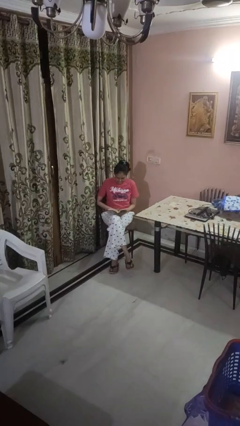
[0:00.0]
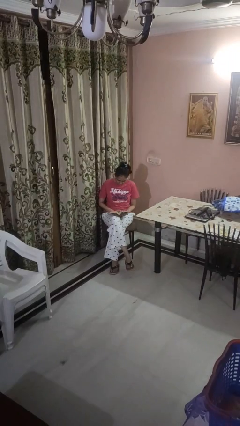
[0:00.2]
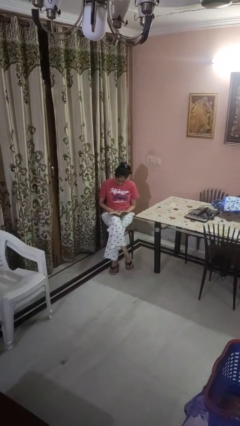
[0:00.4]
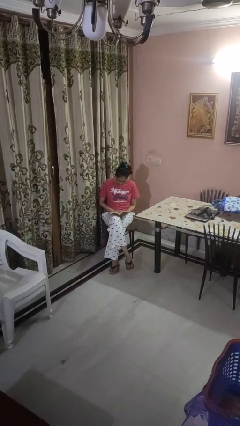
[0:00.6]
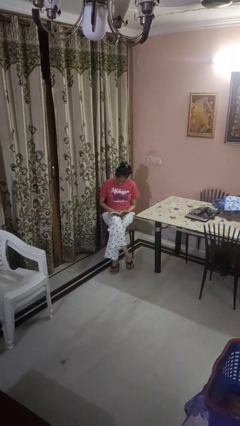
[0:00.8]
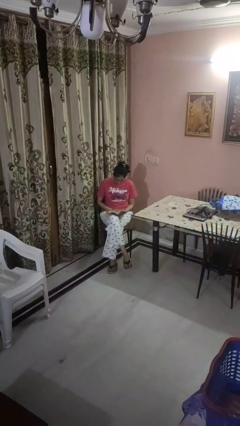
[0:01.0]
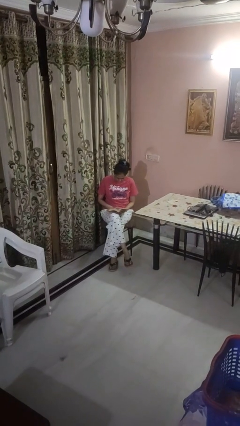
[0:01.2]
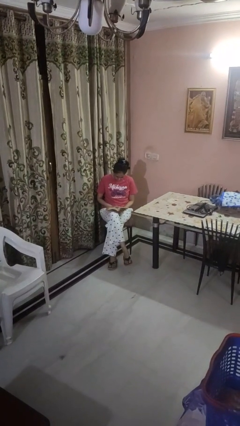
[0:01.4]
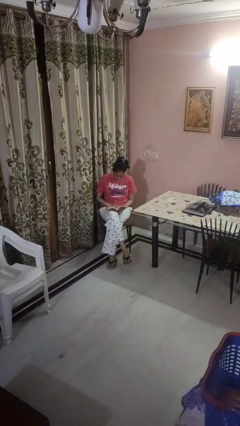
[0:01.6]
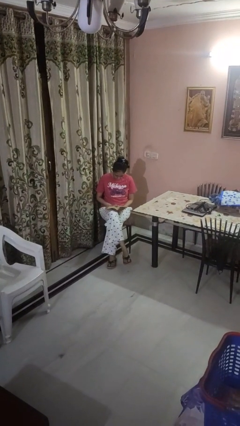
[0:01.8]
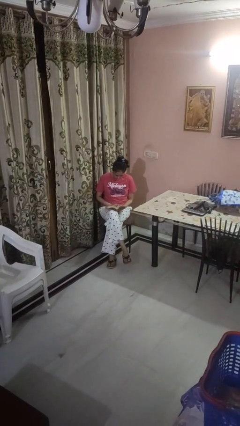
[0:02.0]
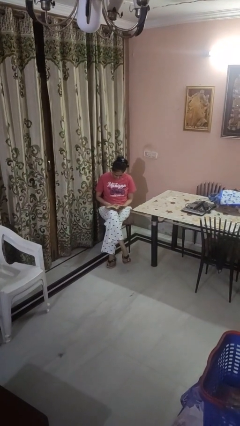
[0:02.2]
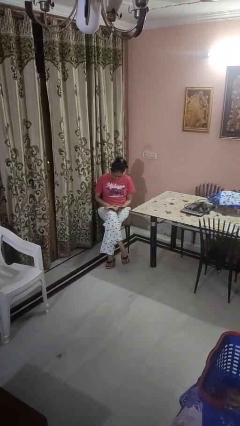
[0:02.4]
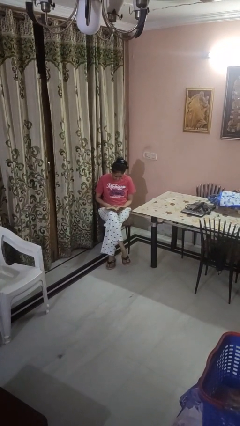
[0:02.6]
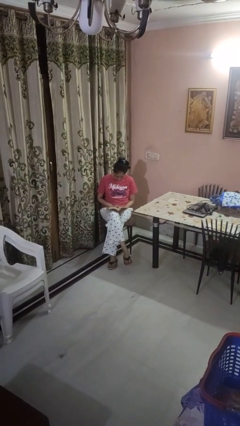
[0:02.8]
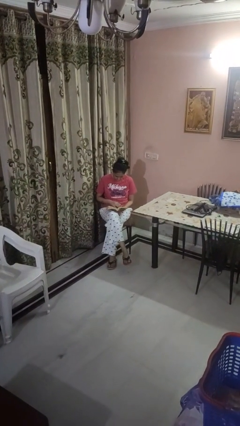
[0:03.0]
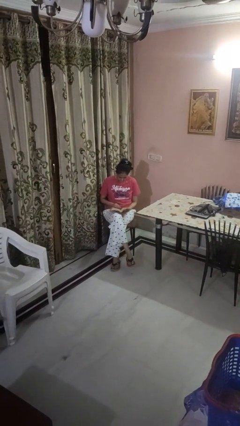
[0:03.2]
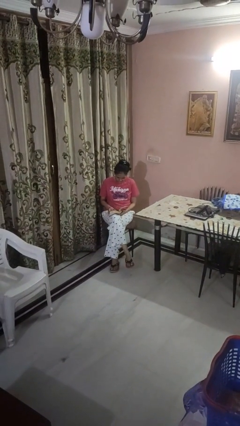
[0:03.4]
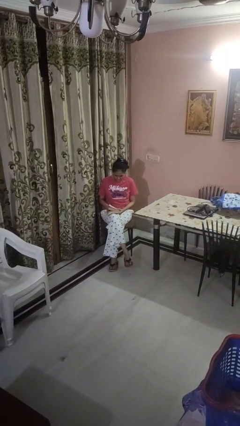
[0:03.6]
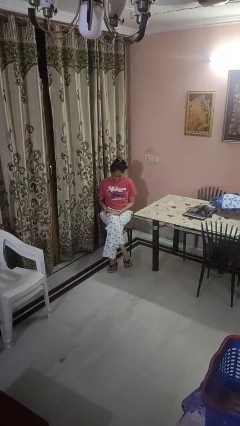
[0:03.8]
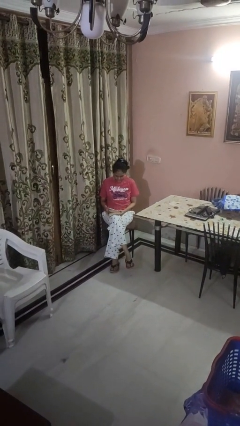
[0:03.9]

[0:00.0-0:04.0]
person reads book

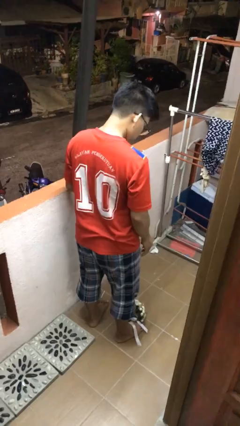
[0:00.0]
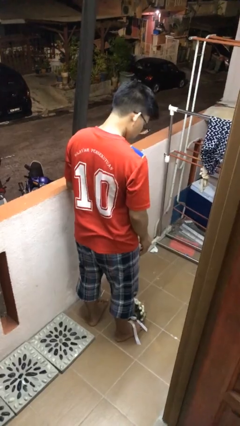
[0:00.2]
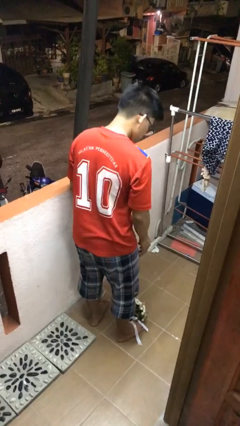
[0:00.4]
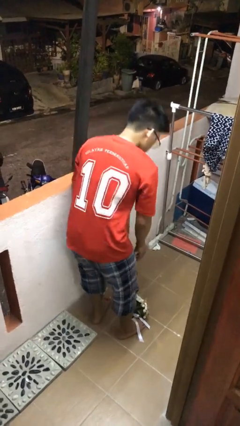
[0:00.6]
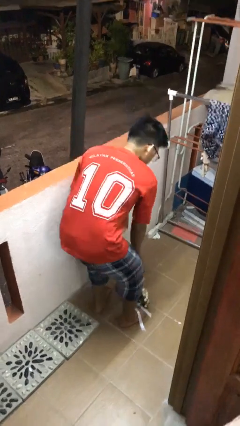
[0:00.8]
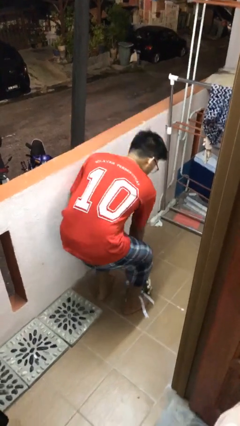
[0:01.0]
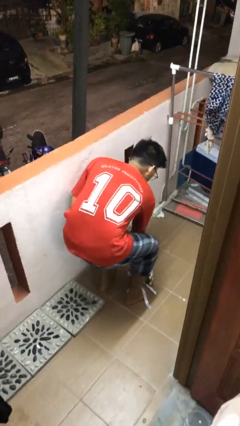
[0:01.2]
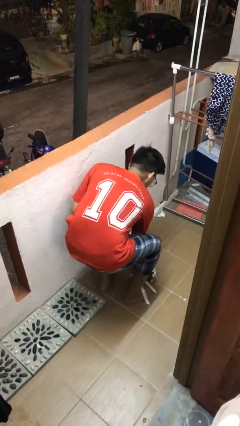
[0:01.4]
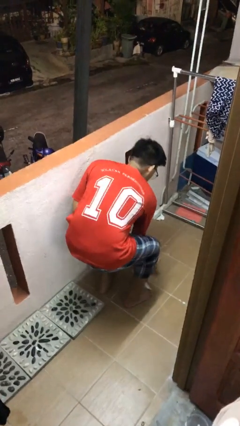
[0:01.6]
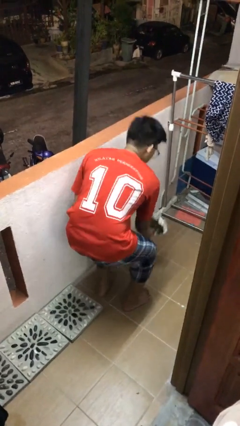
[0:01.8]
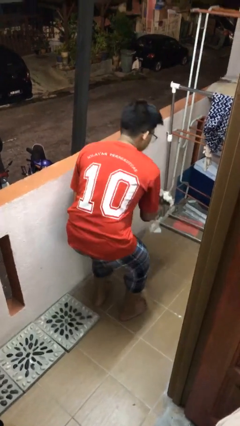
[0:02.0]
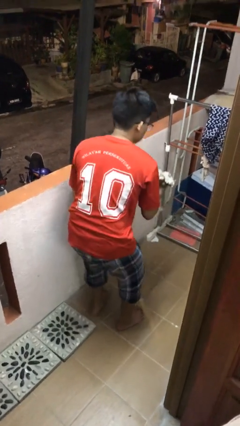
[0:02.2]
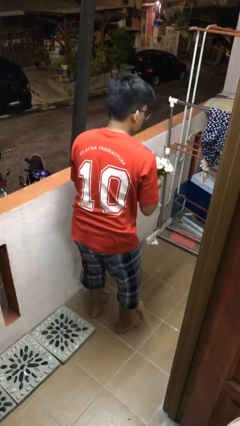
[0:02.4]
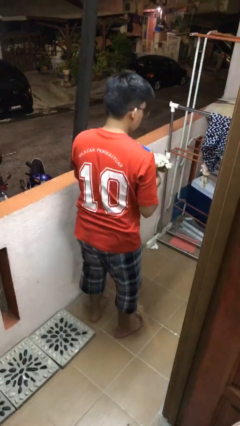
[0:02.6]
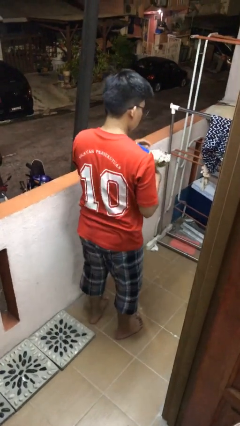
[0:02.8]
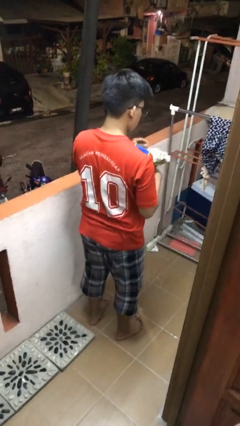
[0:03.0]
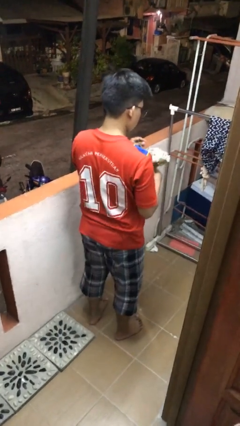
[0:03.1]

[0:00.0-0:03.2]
person picks up object from floor

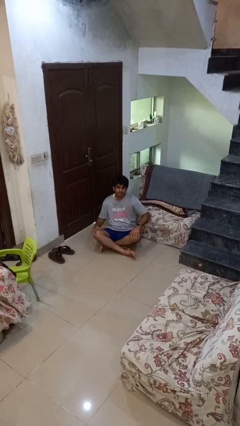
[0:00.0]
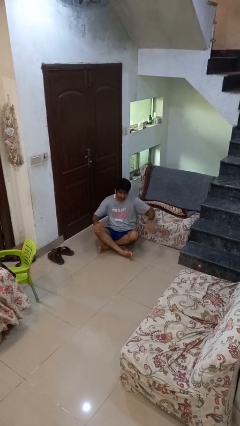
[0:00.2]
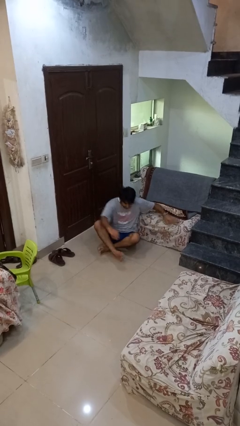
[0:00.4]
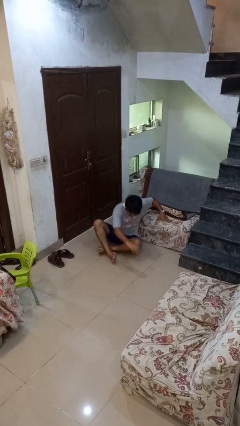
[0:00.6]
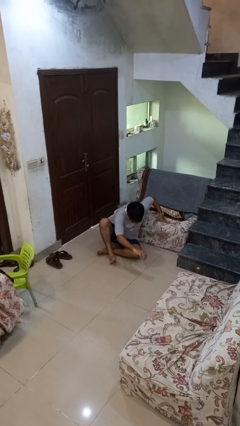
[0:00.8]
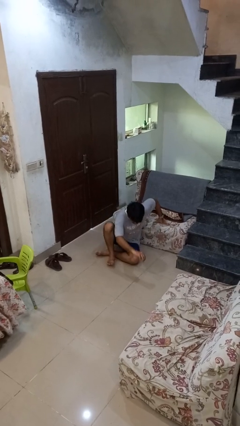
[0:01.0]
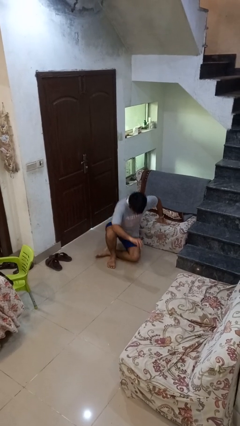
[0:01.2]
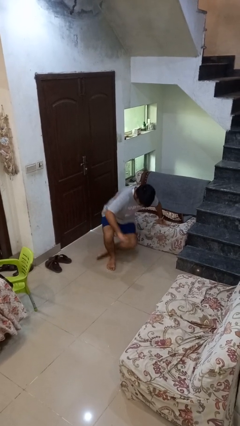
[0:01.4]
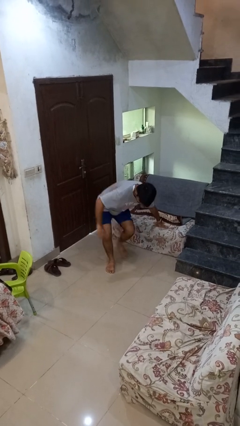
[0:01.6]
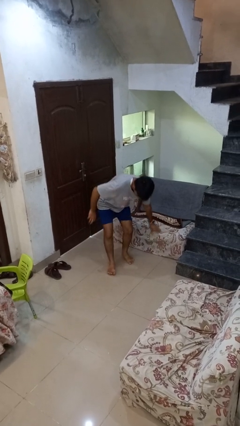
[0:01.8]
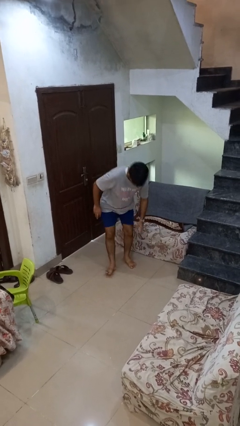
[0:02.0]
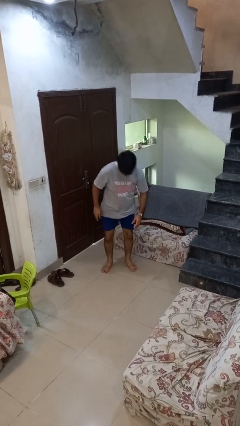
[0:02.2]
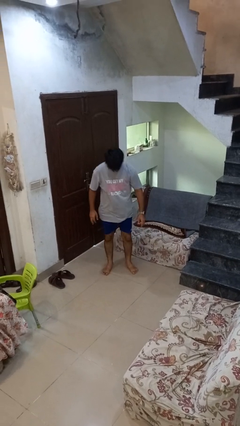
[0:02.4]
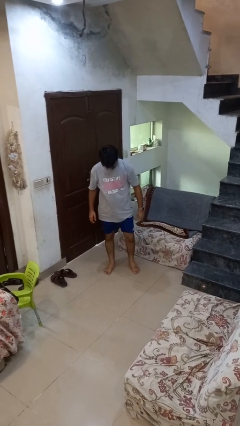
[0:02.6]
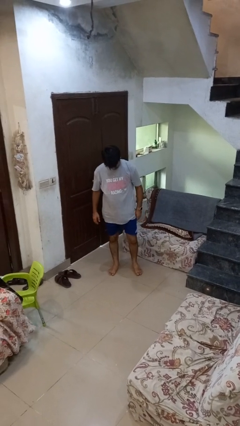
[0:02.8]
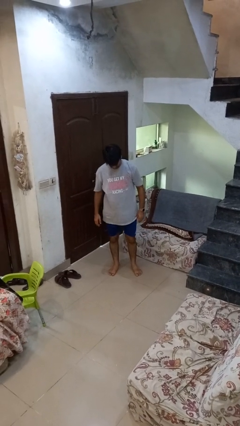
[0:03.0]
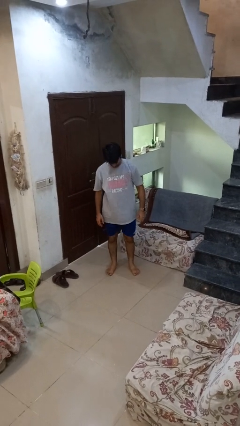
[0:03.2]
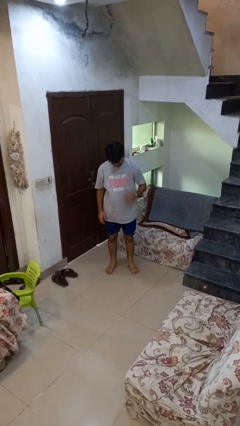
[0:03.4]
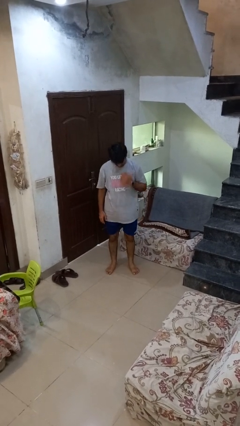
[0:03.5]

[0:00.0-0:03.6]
person stands up from floor

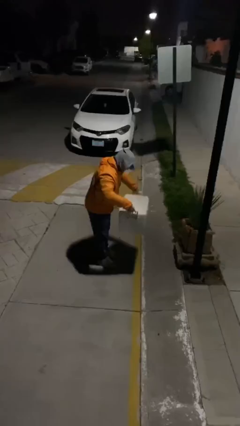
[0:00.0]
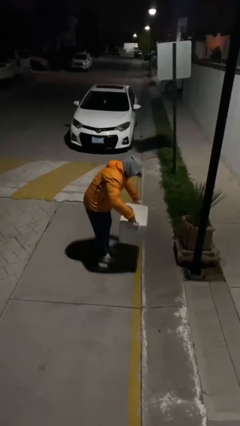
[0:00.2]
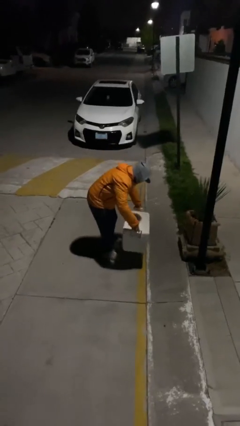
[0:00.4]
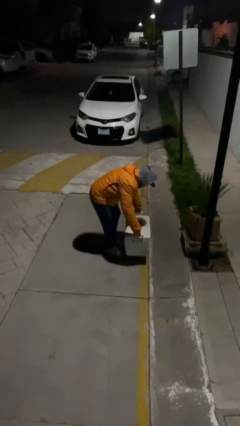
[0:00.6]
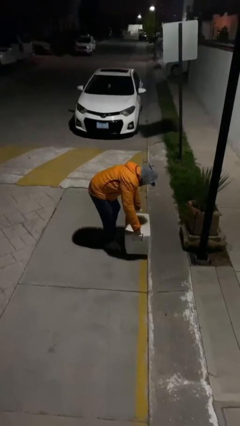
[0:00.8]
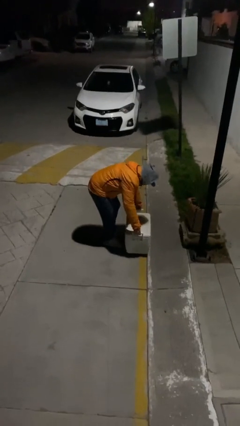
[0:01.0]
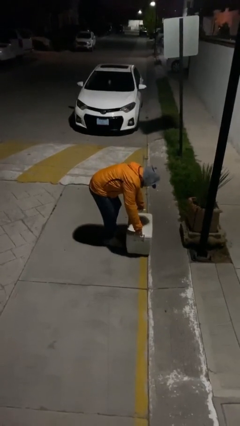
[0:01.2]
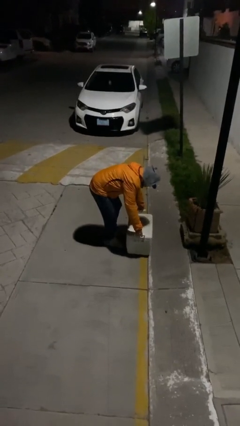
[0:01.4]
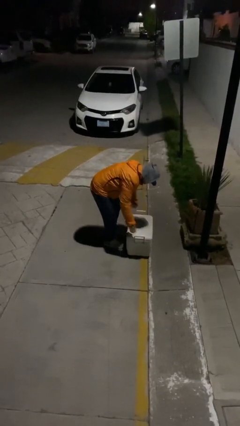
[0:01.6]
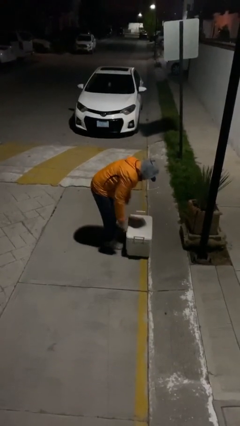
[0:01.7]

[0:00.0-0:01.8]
person puts down object on floor

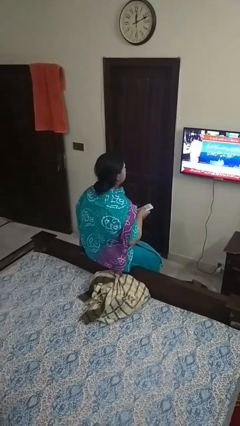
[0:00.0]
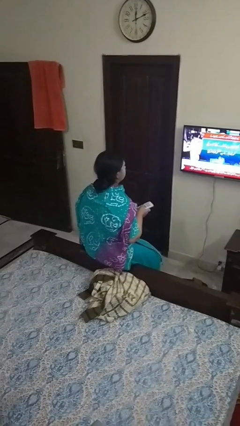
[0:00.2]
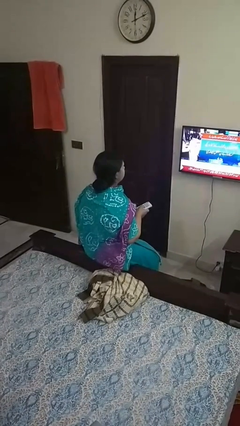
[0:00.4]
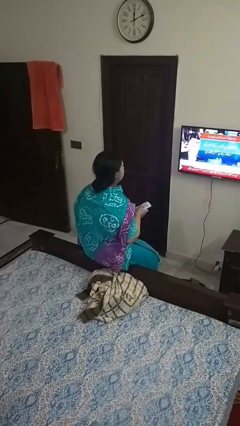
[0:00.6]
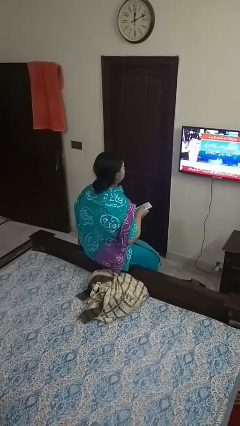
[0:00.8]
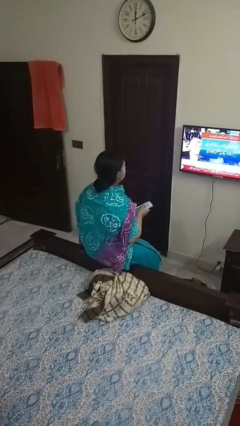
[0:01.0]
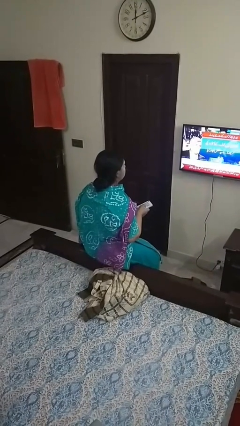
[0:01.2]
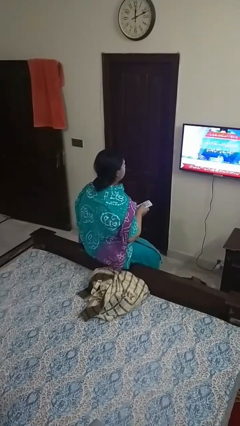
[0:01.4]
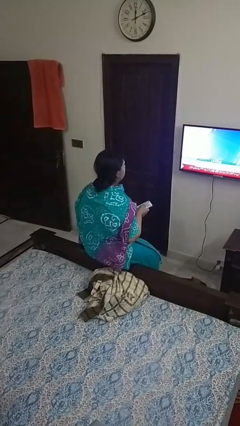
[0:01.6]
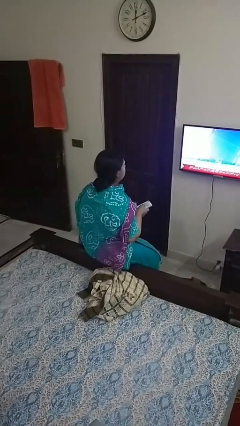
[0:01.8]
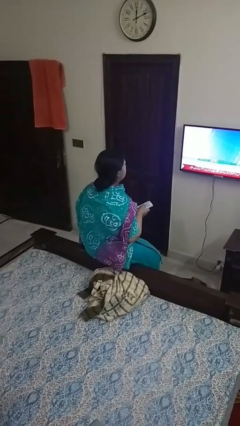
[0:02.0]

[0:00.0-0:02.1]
person uses television remote

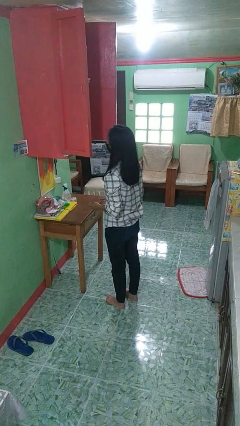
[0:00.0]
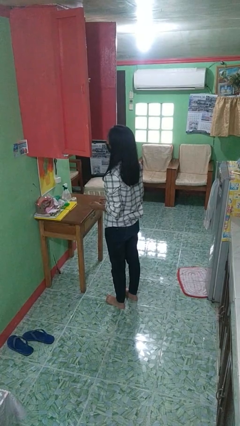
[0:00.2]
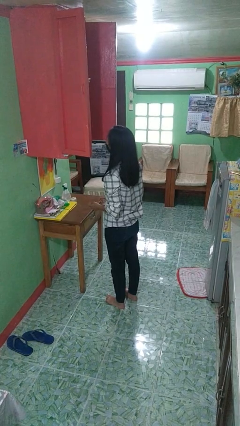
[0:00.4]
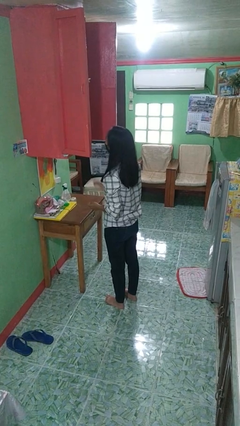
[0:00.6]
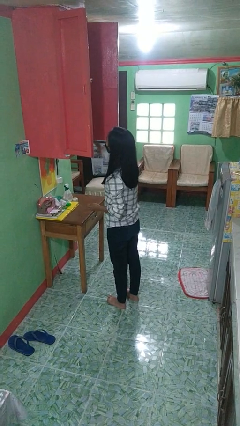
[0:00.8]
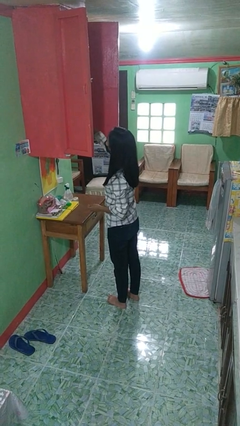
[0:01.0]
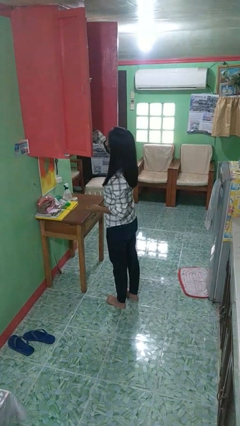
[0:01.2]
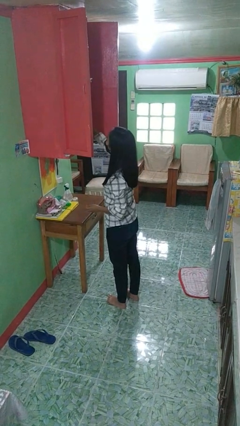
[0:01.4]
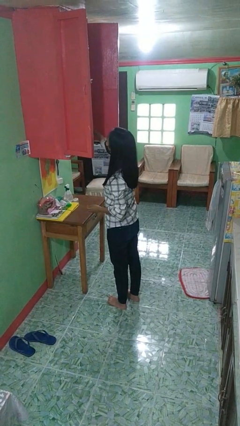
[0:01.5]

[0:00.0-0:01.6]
person picks up object from cabinet

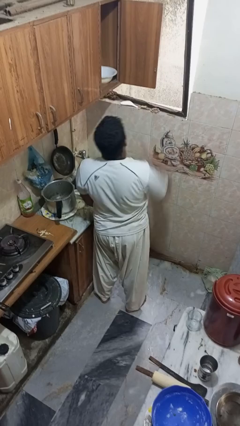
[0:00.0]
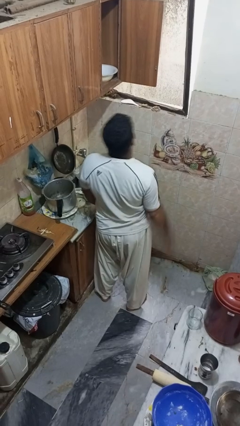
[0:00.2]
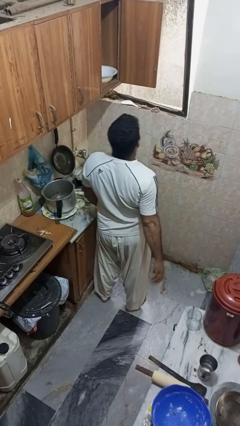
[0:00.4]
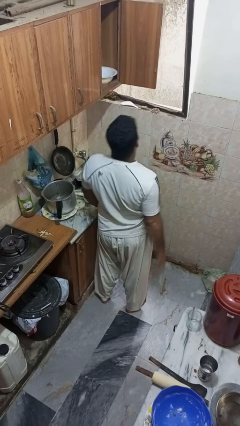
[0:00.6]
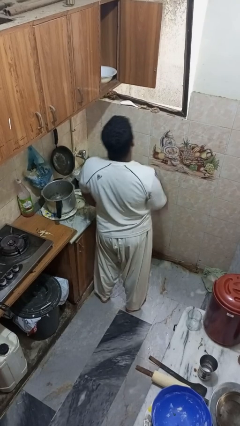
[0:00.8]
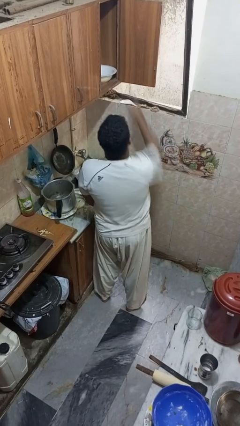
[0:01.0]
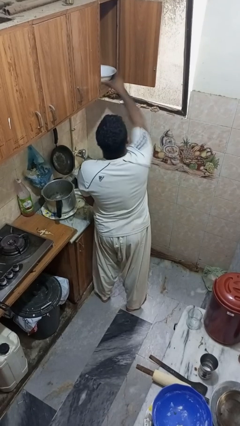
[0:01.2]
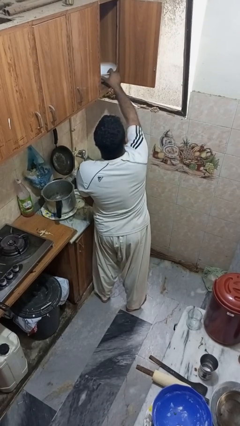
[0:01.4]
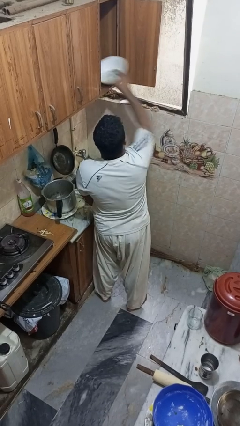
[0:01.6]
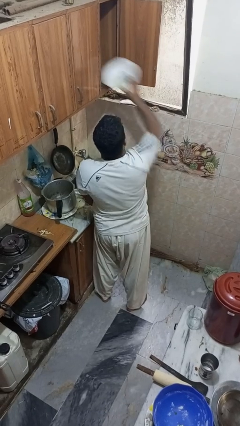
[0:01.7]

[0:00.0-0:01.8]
person takes object from cabinet
